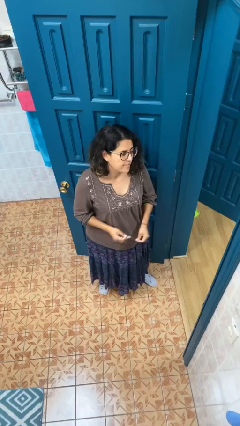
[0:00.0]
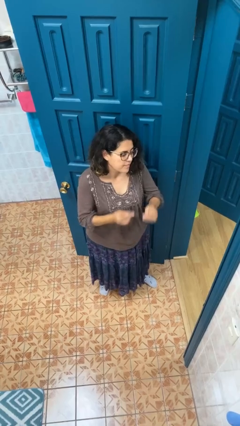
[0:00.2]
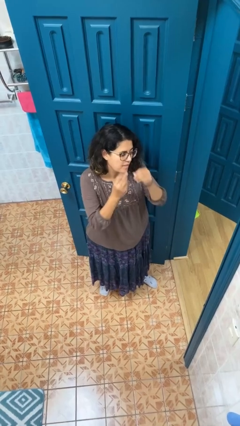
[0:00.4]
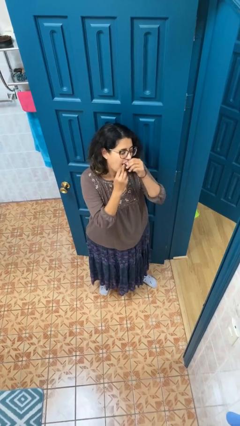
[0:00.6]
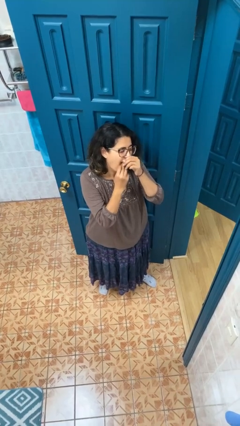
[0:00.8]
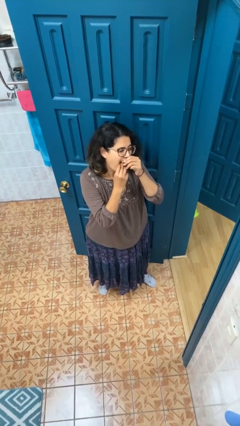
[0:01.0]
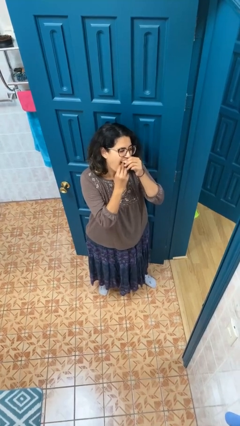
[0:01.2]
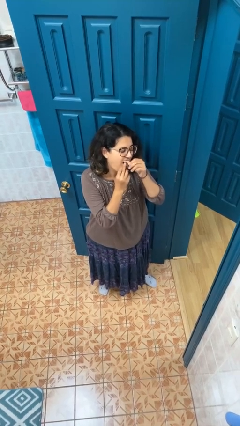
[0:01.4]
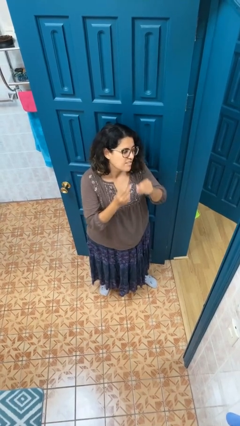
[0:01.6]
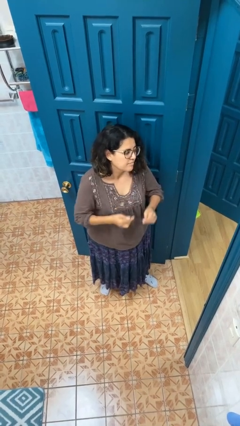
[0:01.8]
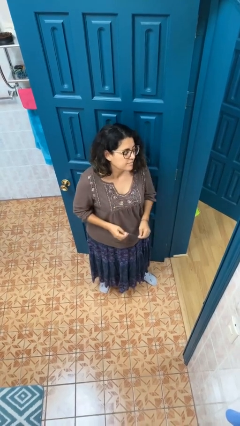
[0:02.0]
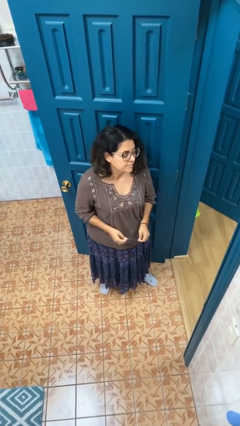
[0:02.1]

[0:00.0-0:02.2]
person flosses

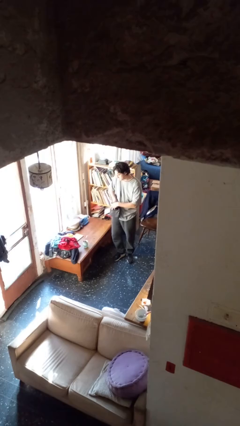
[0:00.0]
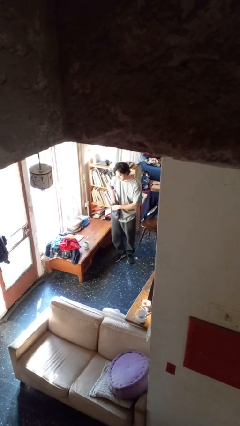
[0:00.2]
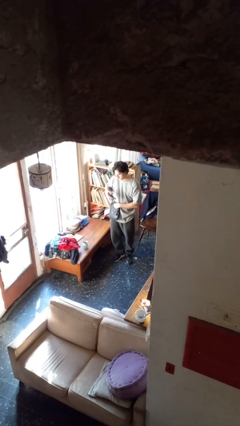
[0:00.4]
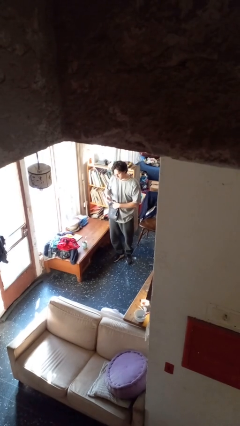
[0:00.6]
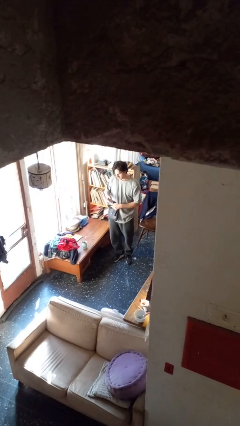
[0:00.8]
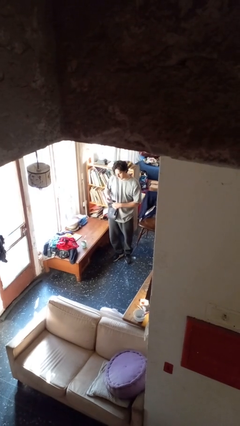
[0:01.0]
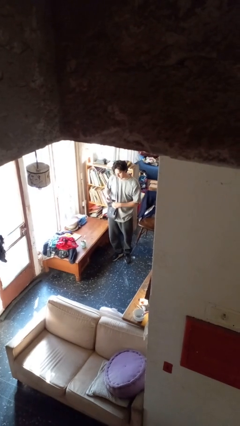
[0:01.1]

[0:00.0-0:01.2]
person takes object from purse

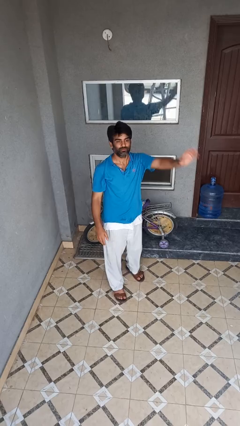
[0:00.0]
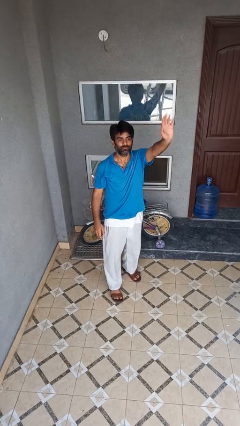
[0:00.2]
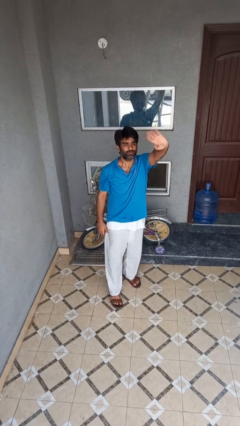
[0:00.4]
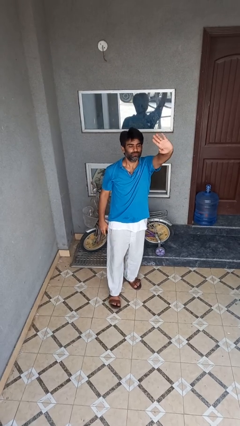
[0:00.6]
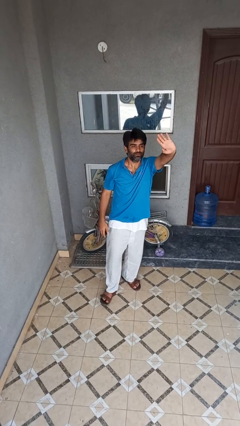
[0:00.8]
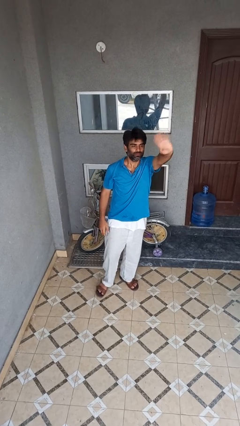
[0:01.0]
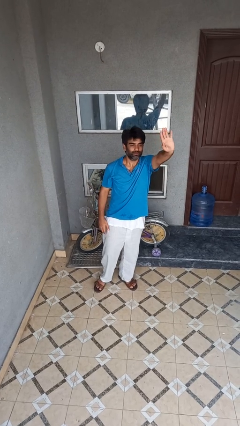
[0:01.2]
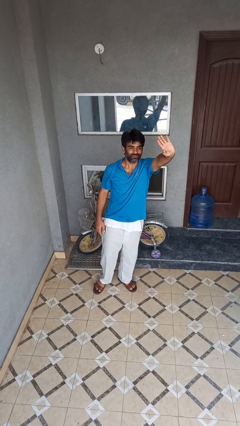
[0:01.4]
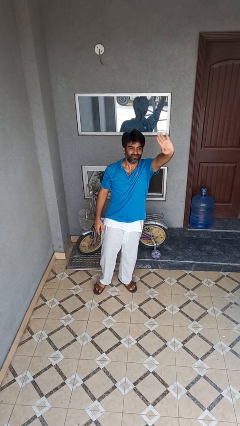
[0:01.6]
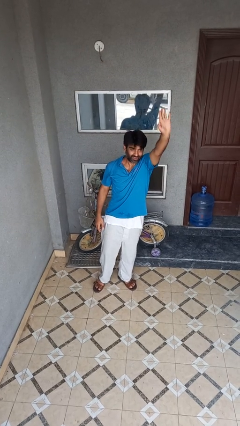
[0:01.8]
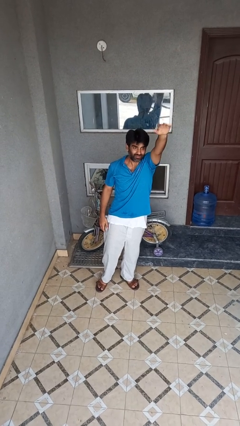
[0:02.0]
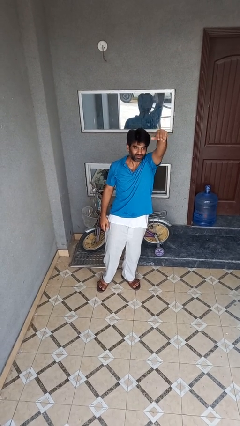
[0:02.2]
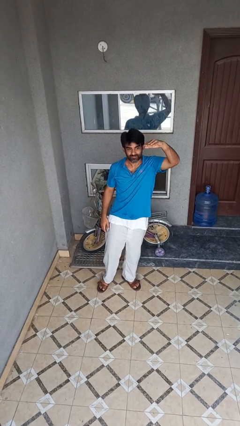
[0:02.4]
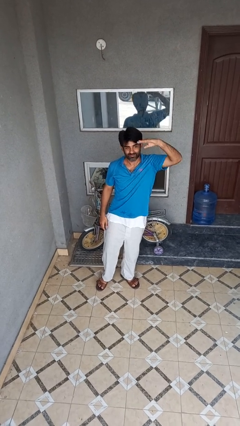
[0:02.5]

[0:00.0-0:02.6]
person waves at person

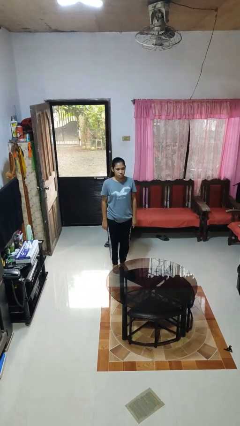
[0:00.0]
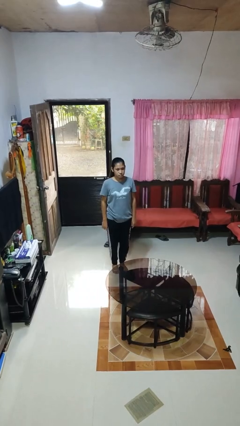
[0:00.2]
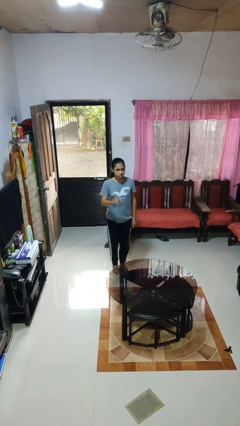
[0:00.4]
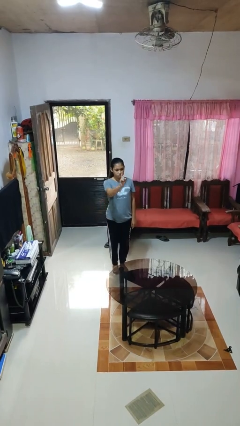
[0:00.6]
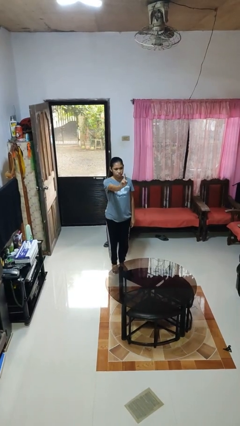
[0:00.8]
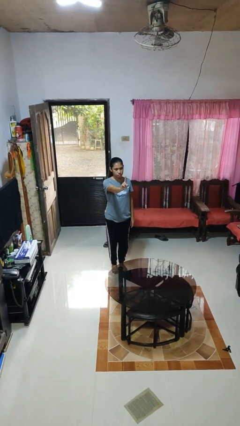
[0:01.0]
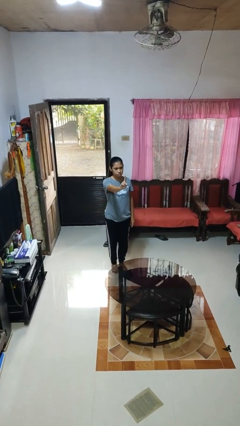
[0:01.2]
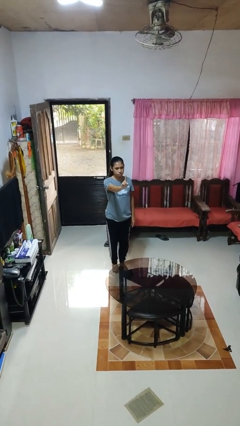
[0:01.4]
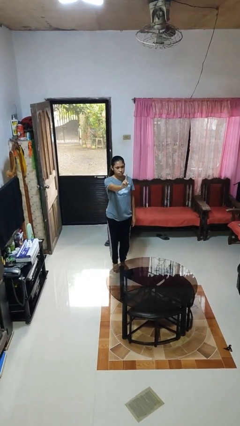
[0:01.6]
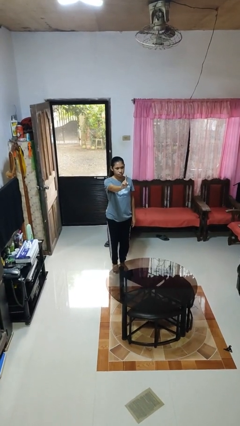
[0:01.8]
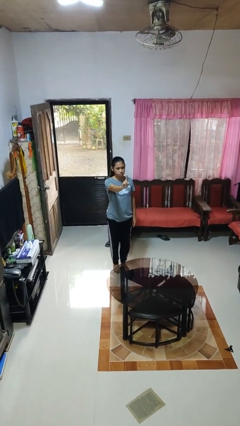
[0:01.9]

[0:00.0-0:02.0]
person gestures number one

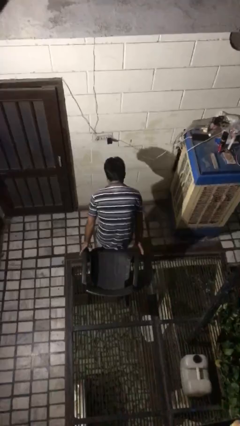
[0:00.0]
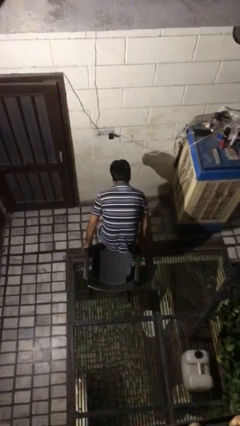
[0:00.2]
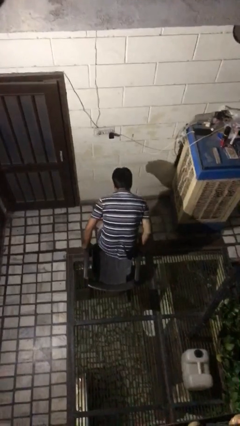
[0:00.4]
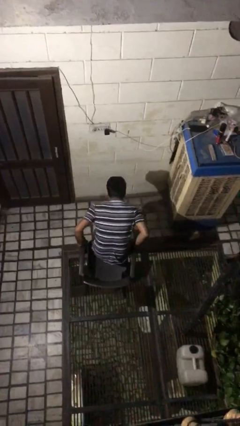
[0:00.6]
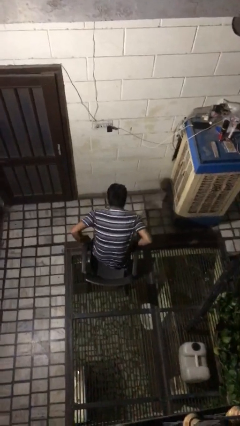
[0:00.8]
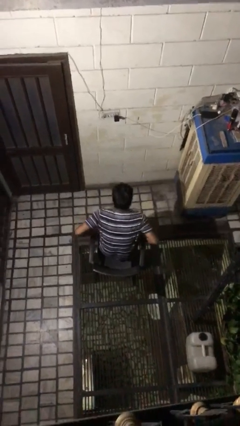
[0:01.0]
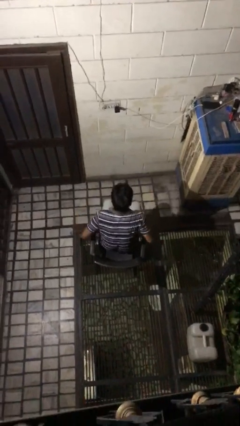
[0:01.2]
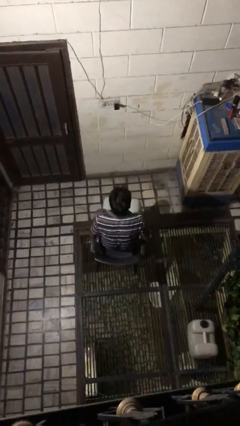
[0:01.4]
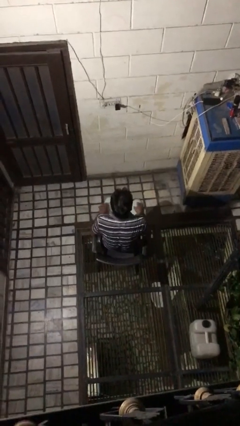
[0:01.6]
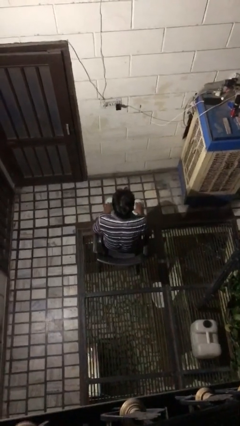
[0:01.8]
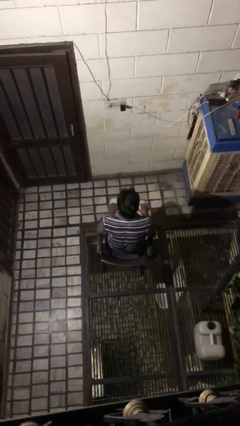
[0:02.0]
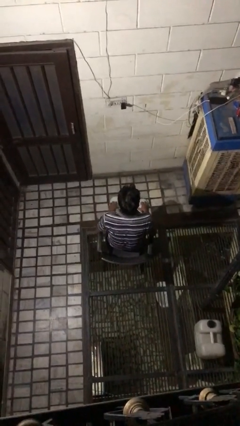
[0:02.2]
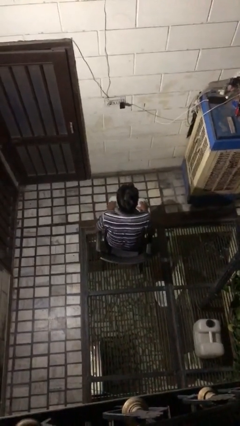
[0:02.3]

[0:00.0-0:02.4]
person sits down

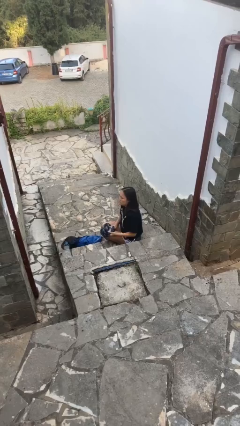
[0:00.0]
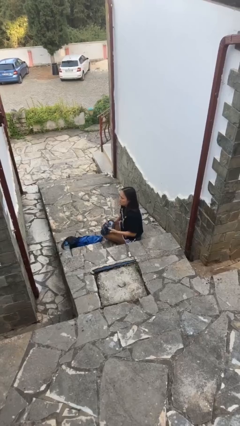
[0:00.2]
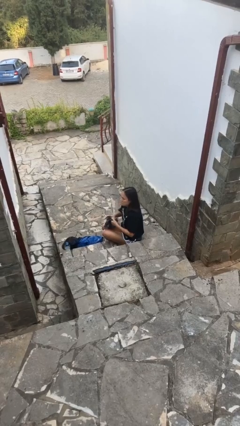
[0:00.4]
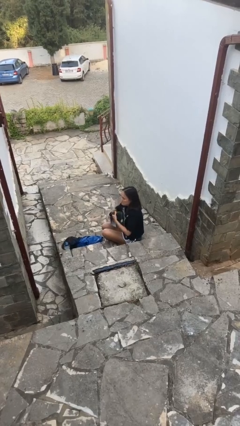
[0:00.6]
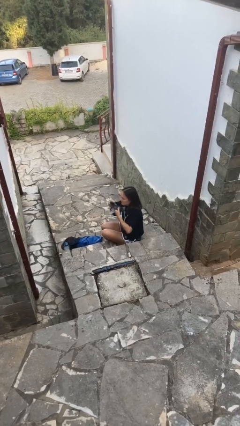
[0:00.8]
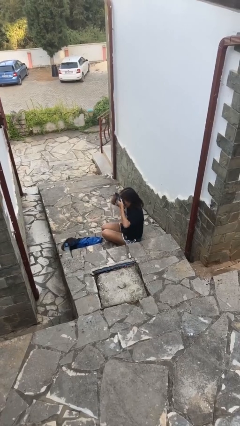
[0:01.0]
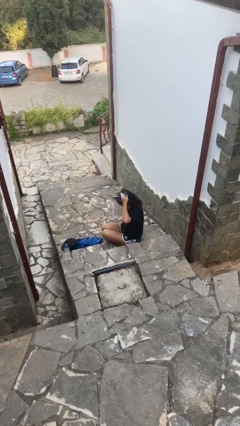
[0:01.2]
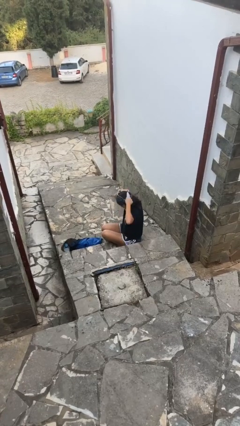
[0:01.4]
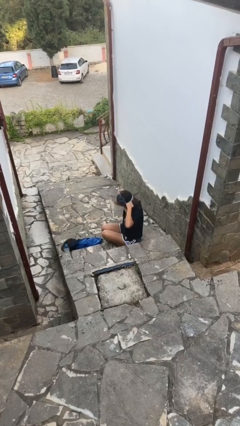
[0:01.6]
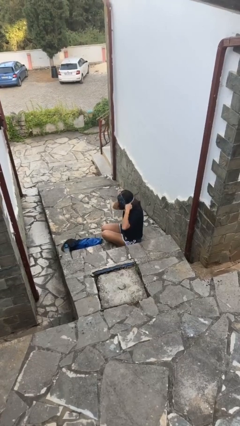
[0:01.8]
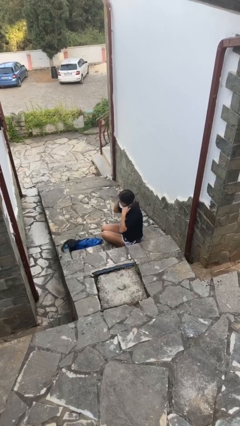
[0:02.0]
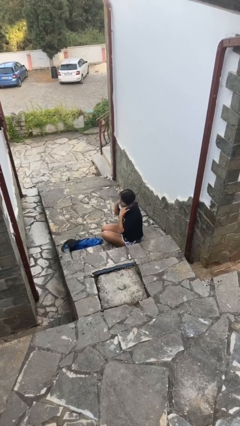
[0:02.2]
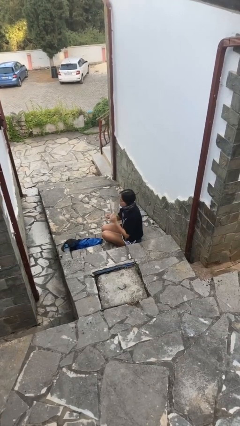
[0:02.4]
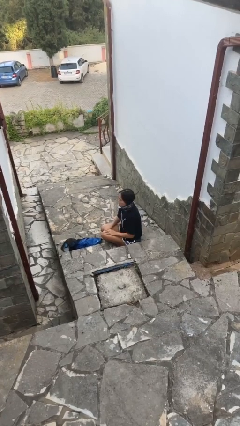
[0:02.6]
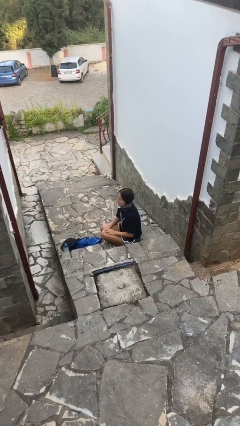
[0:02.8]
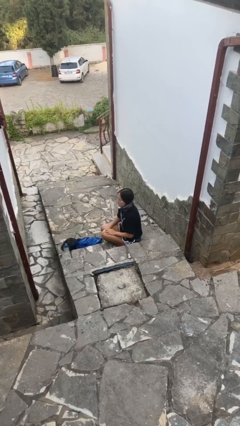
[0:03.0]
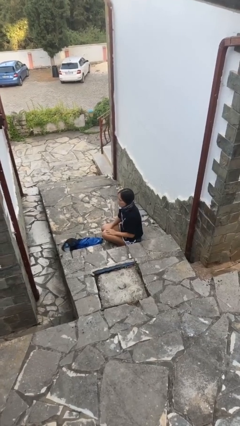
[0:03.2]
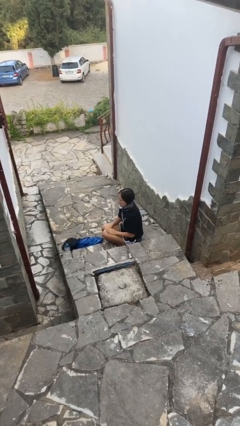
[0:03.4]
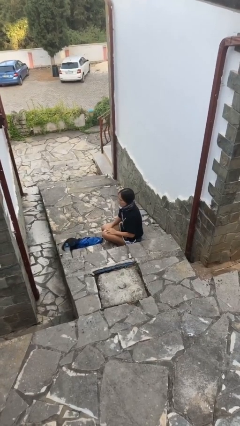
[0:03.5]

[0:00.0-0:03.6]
person puts on scarf

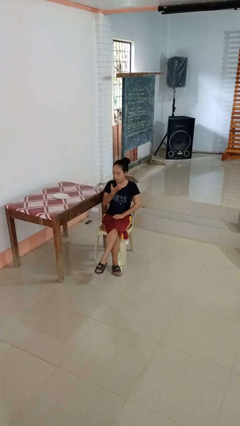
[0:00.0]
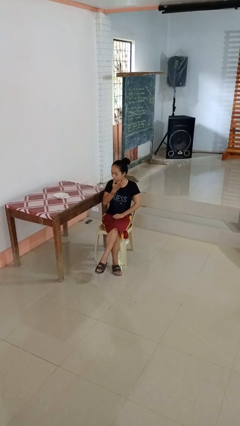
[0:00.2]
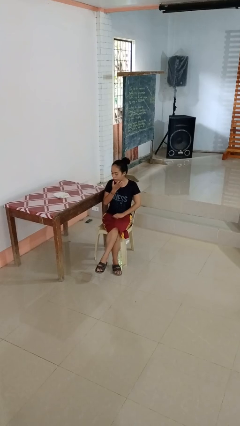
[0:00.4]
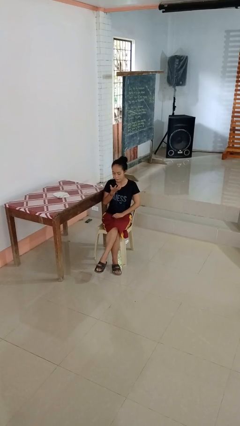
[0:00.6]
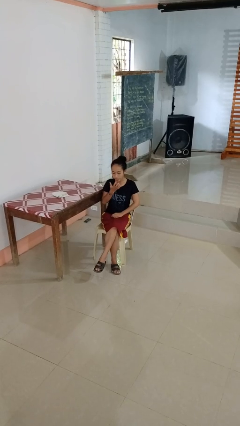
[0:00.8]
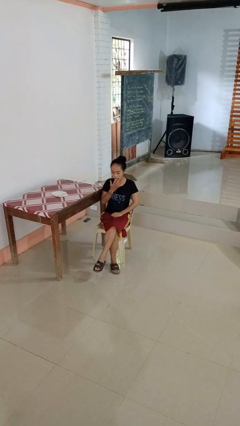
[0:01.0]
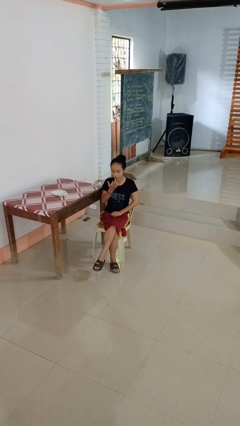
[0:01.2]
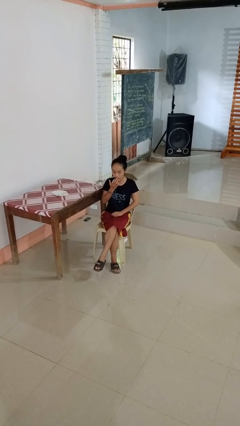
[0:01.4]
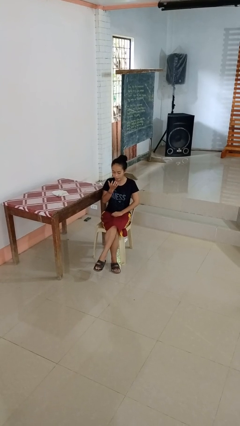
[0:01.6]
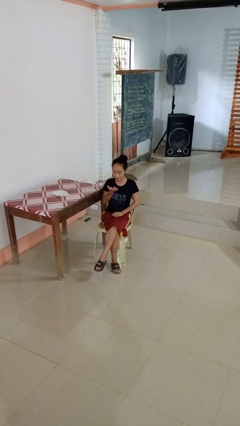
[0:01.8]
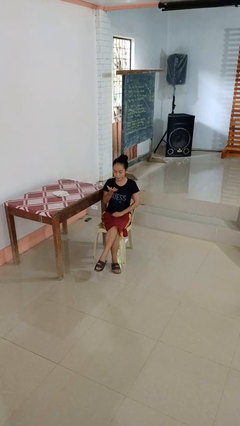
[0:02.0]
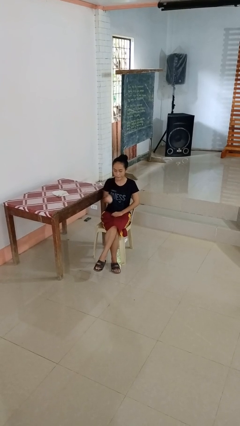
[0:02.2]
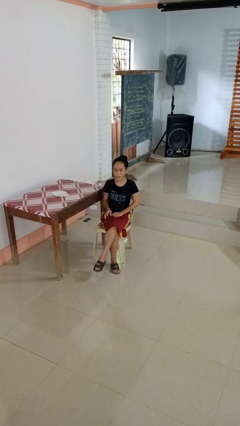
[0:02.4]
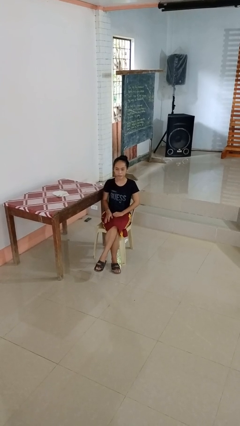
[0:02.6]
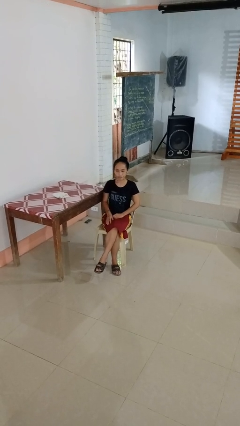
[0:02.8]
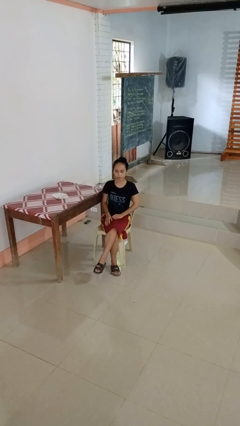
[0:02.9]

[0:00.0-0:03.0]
person licks fingers

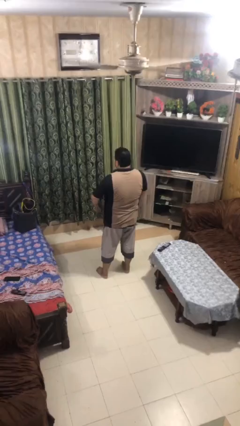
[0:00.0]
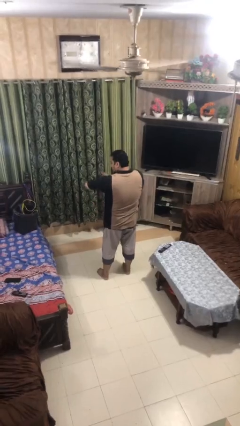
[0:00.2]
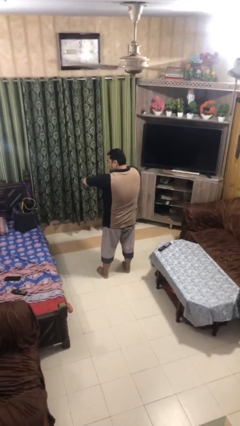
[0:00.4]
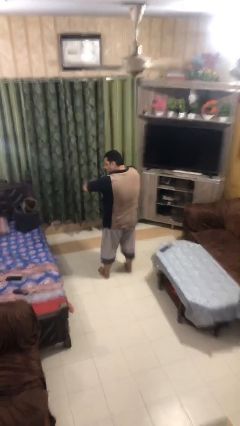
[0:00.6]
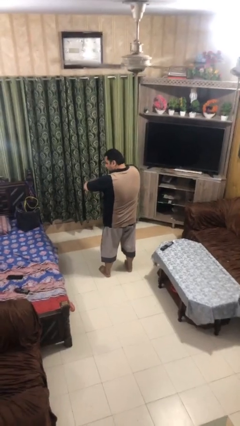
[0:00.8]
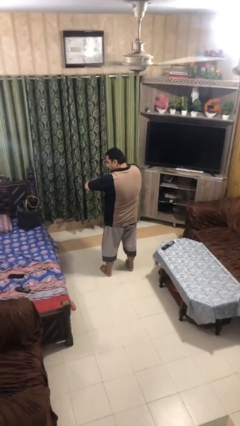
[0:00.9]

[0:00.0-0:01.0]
person swats bug
